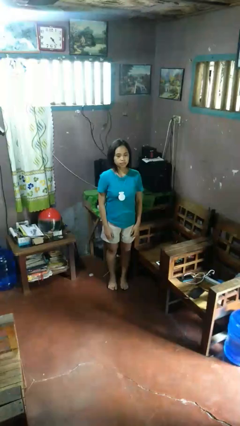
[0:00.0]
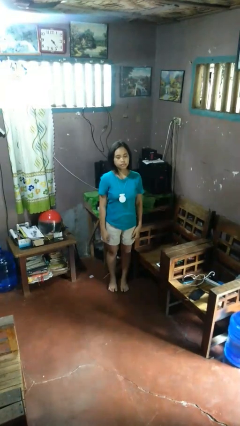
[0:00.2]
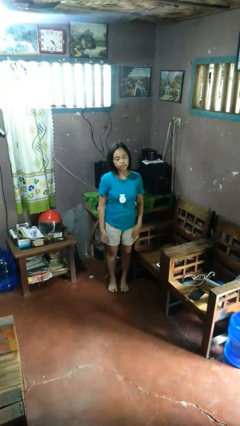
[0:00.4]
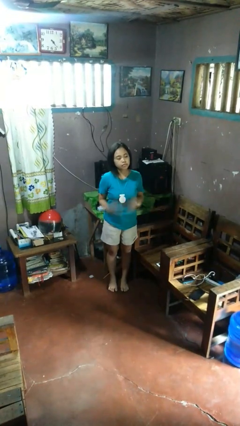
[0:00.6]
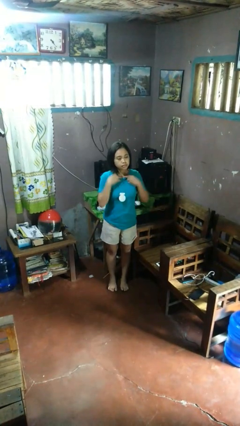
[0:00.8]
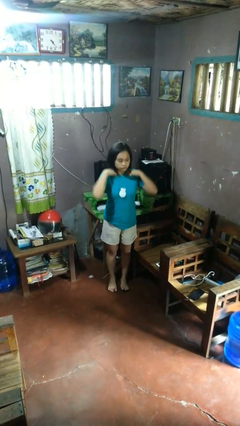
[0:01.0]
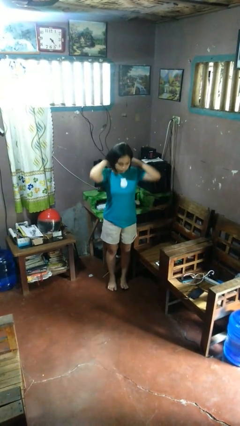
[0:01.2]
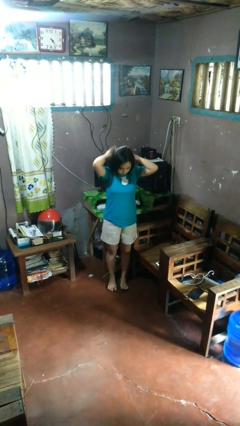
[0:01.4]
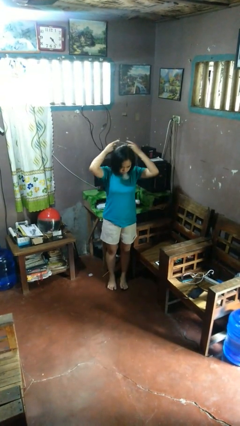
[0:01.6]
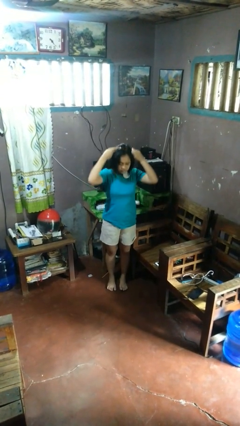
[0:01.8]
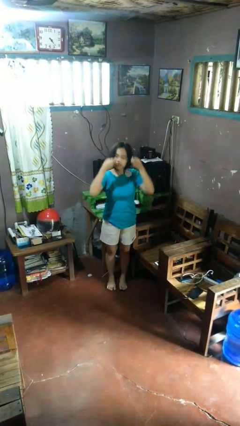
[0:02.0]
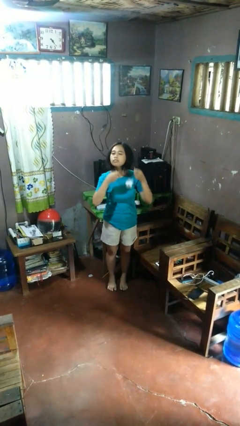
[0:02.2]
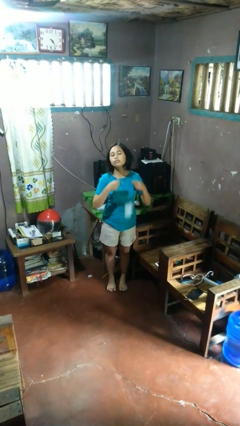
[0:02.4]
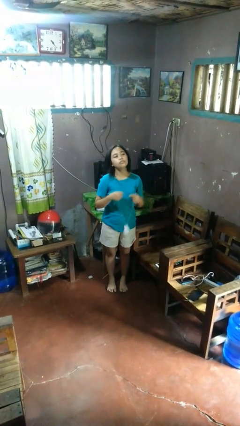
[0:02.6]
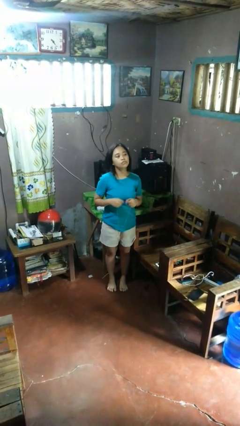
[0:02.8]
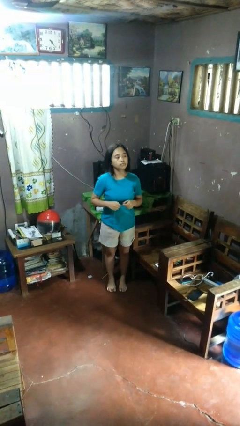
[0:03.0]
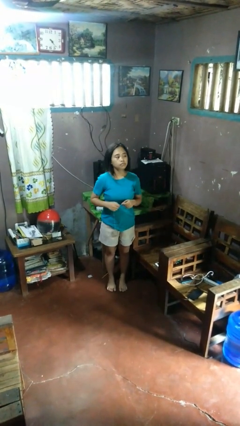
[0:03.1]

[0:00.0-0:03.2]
person takes off necklace

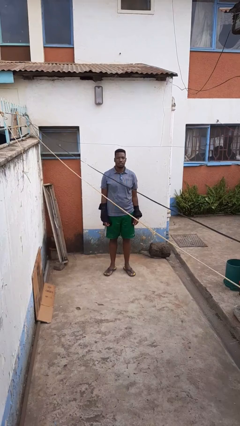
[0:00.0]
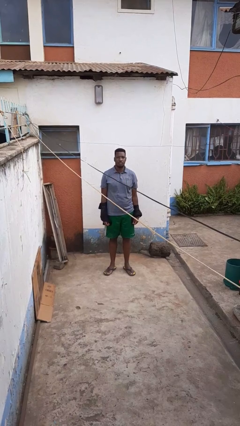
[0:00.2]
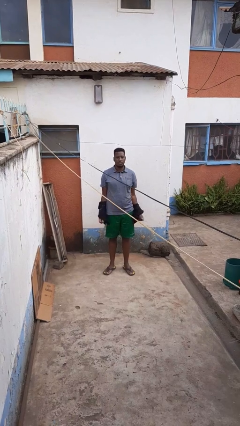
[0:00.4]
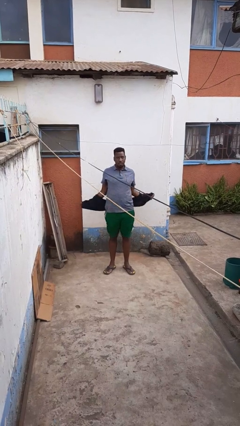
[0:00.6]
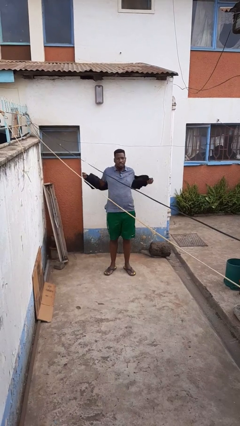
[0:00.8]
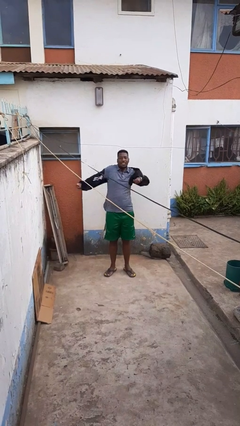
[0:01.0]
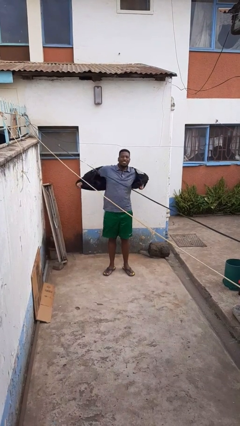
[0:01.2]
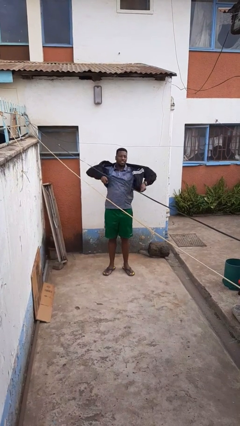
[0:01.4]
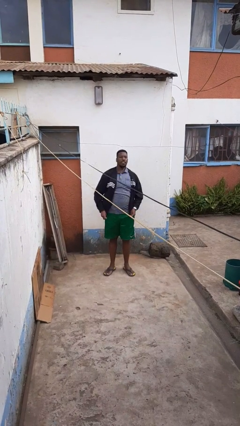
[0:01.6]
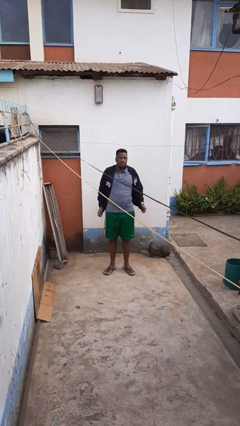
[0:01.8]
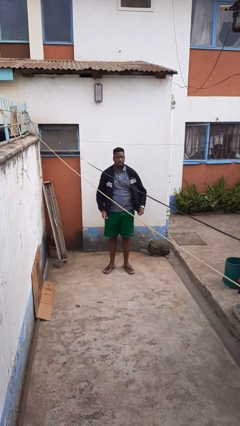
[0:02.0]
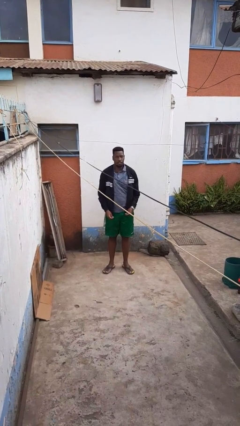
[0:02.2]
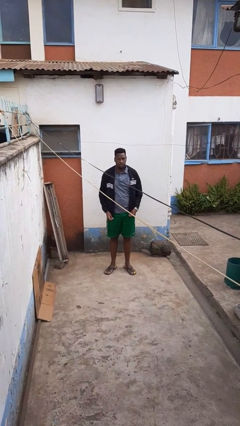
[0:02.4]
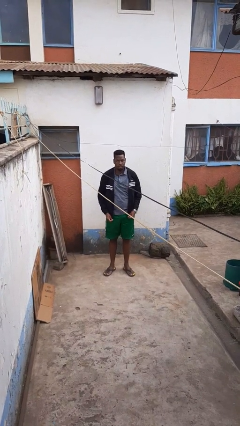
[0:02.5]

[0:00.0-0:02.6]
person puts on jacket

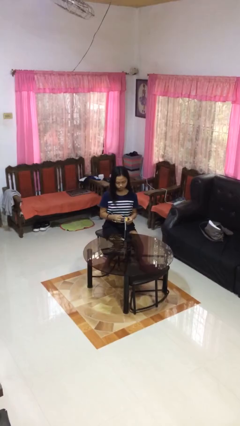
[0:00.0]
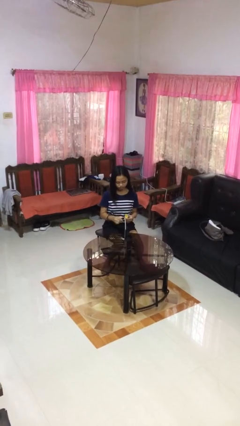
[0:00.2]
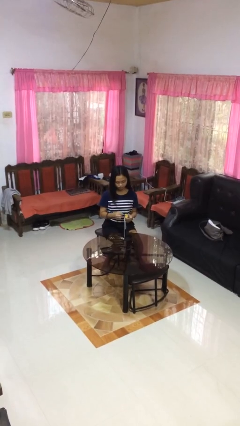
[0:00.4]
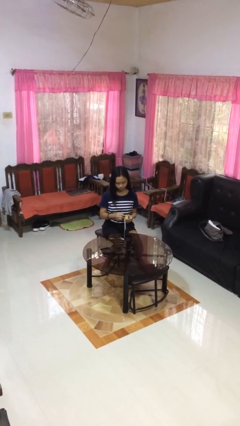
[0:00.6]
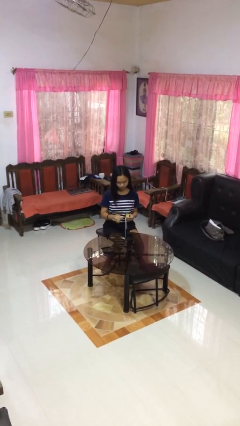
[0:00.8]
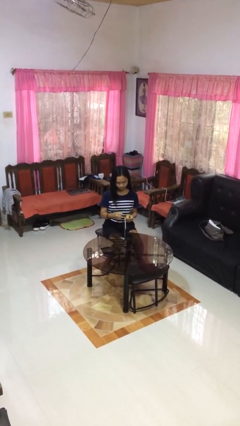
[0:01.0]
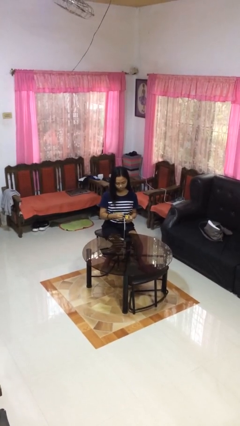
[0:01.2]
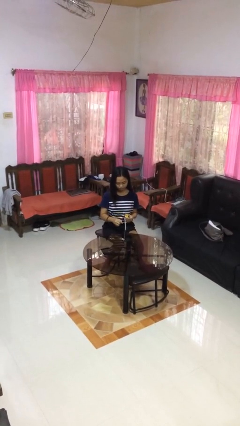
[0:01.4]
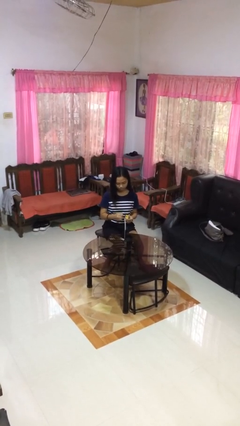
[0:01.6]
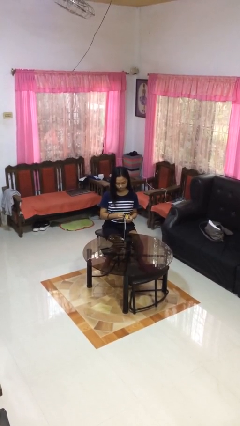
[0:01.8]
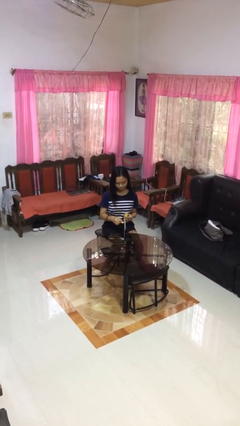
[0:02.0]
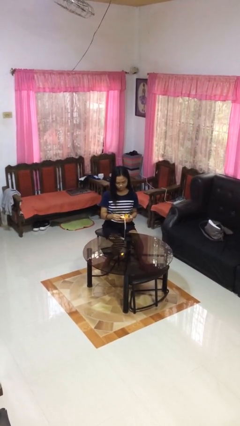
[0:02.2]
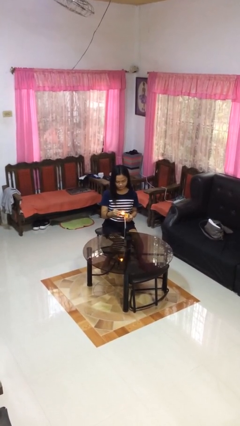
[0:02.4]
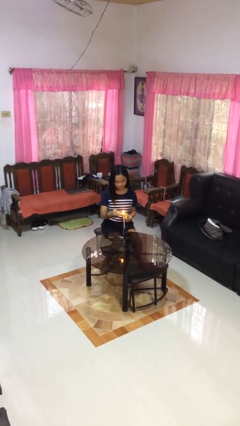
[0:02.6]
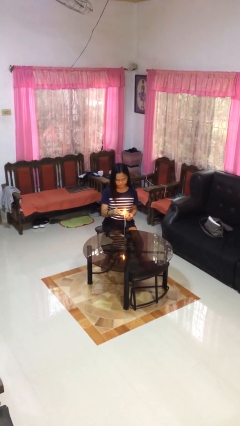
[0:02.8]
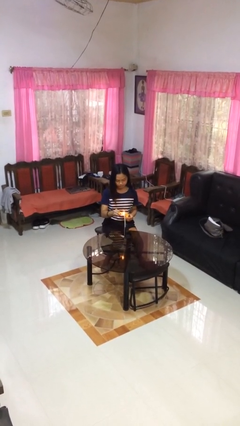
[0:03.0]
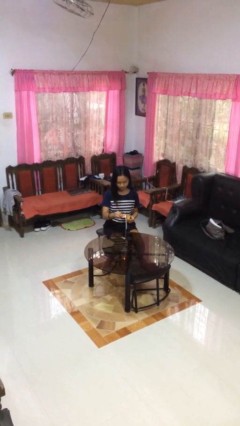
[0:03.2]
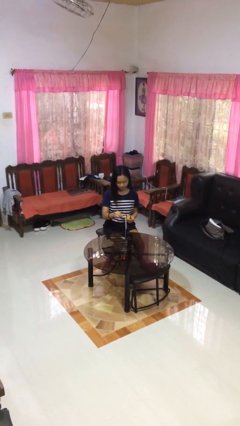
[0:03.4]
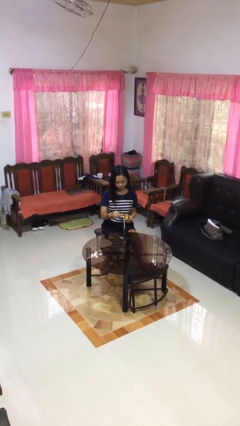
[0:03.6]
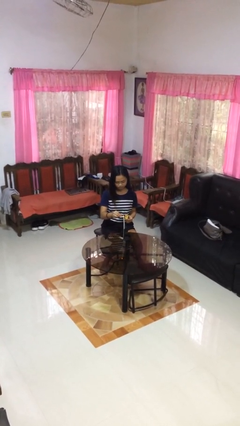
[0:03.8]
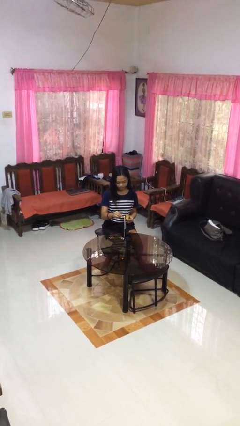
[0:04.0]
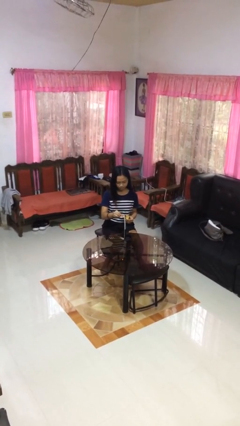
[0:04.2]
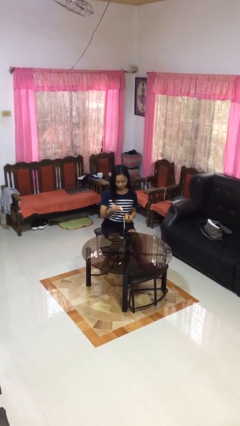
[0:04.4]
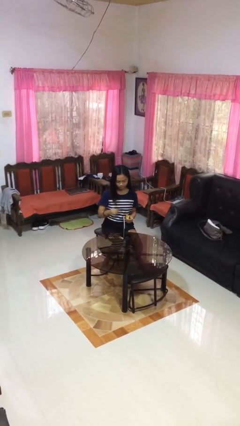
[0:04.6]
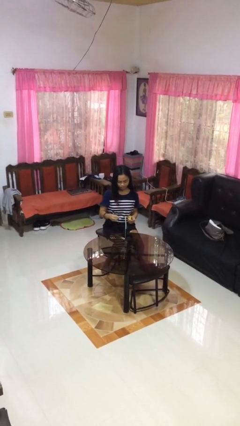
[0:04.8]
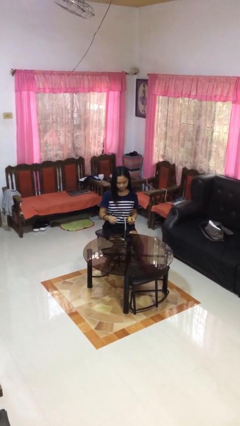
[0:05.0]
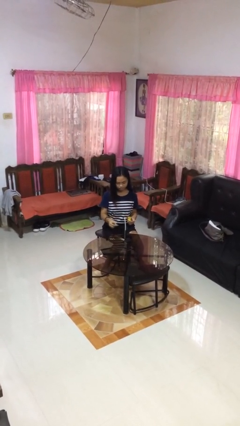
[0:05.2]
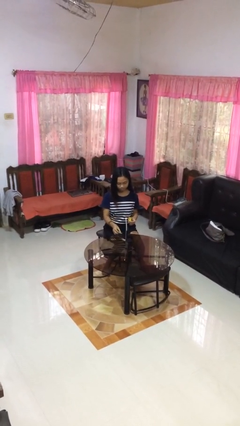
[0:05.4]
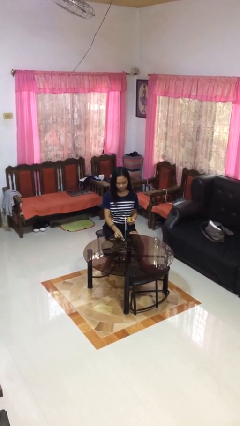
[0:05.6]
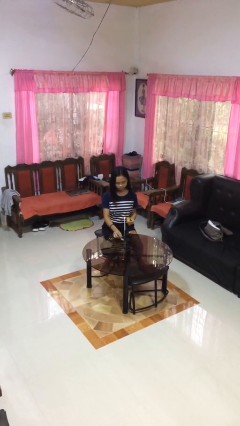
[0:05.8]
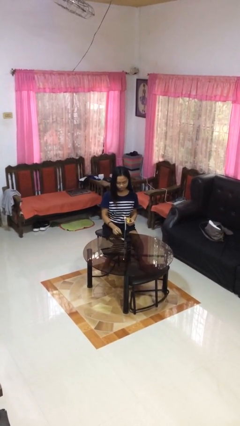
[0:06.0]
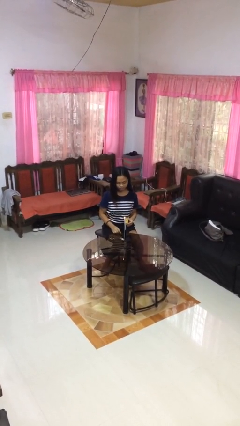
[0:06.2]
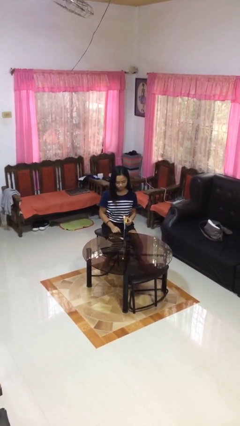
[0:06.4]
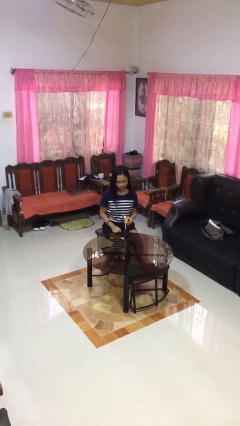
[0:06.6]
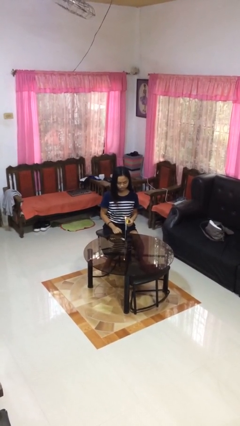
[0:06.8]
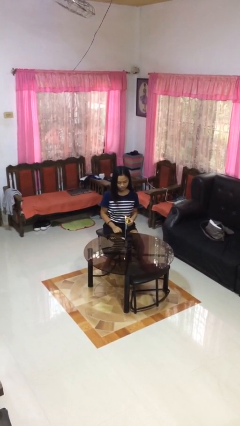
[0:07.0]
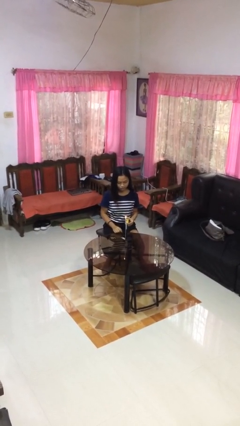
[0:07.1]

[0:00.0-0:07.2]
person lights candle

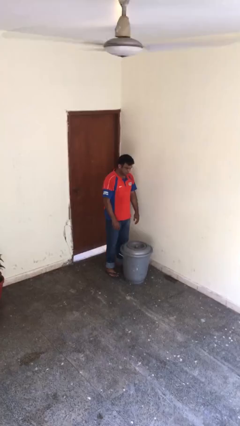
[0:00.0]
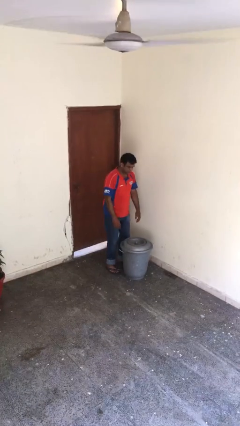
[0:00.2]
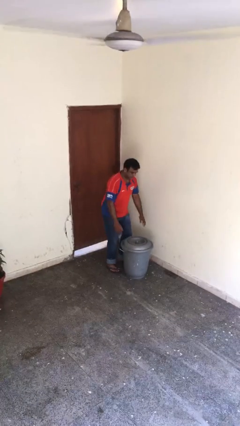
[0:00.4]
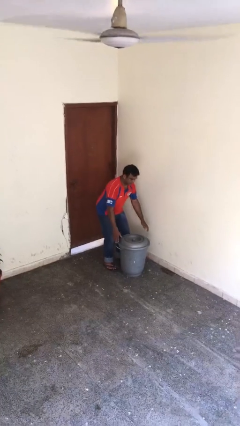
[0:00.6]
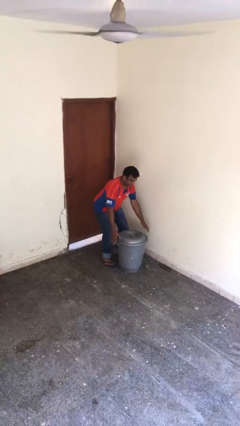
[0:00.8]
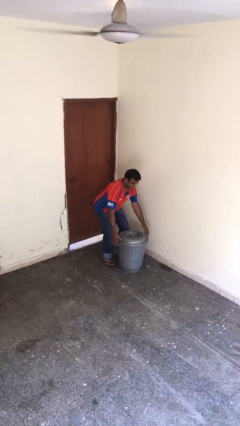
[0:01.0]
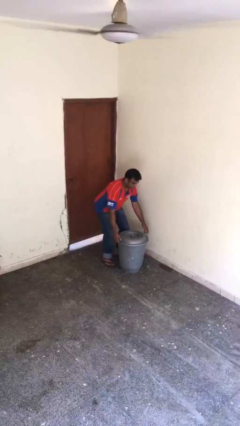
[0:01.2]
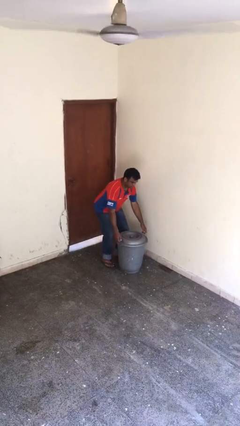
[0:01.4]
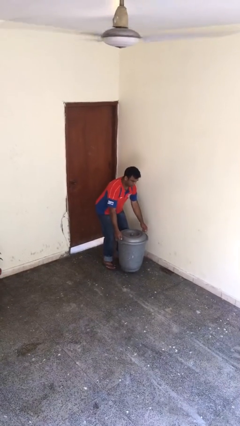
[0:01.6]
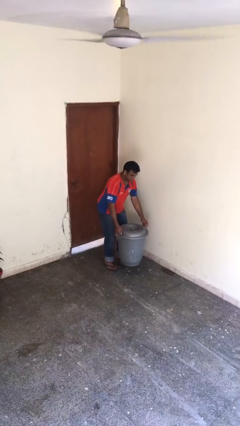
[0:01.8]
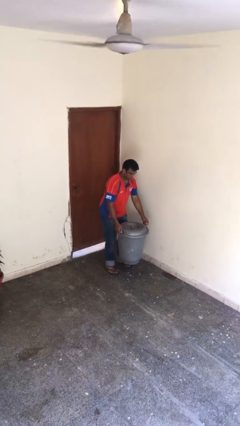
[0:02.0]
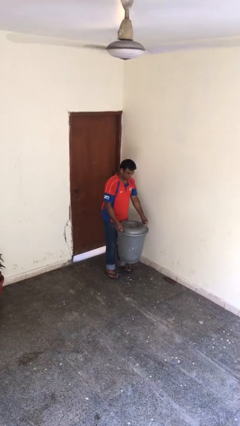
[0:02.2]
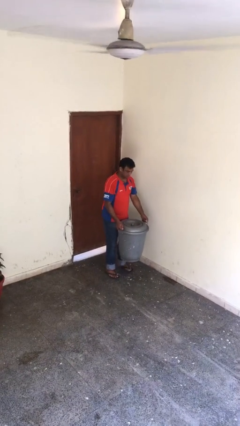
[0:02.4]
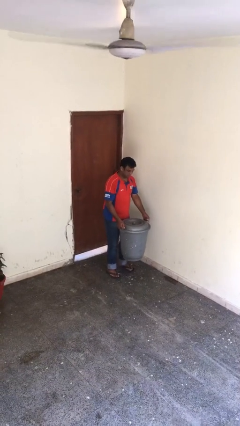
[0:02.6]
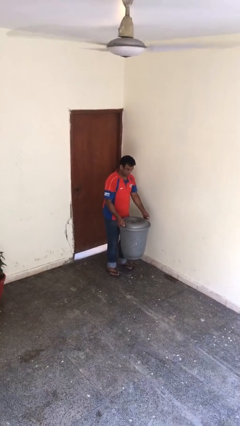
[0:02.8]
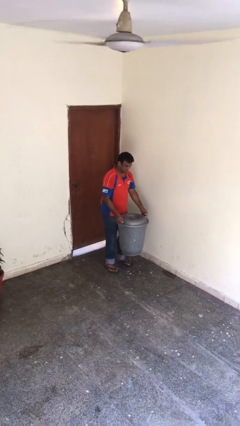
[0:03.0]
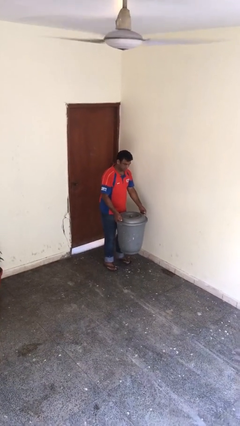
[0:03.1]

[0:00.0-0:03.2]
person picks up object from floor

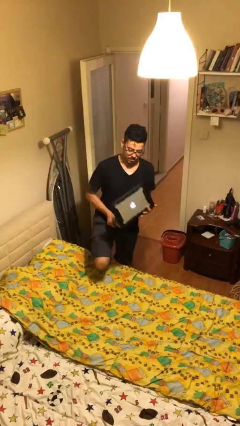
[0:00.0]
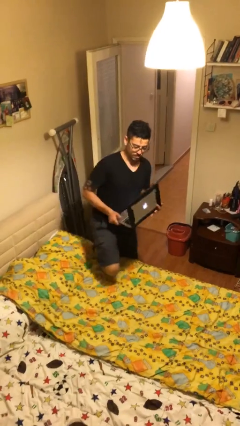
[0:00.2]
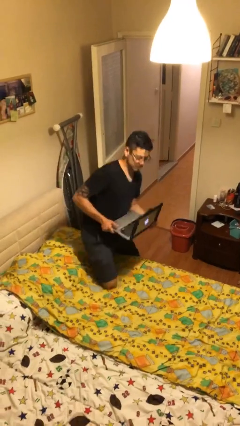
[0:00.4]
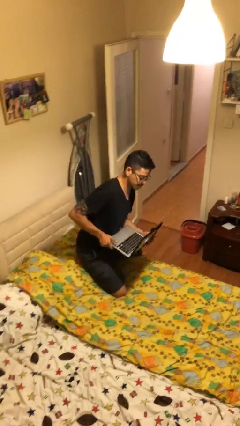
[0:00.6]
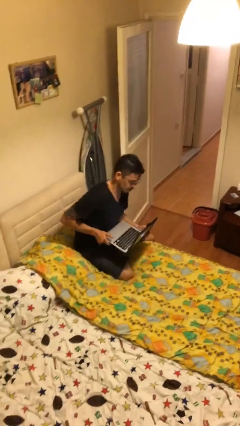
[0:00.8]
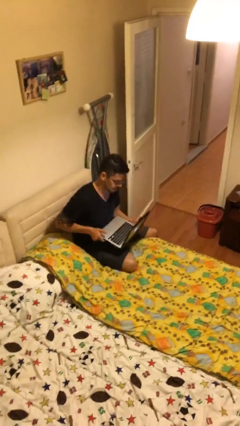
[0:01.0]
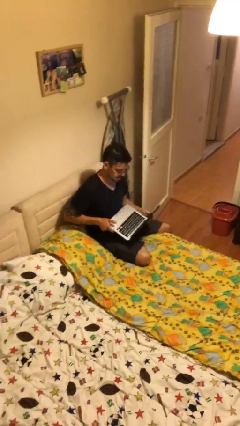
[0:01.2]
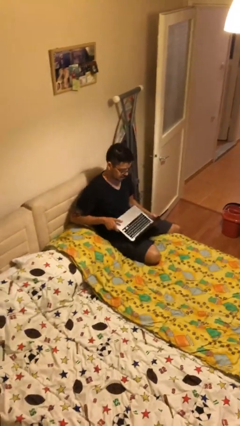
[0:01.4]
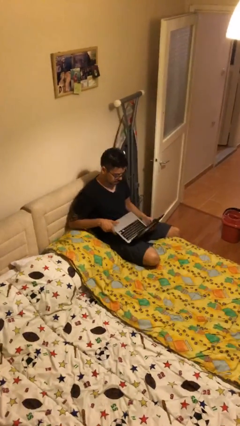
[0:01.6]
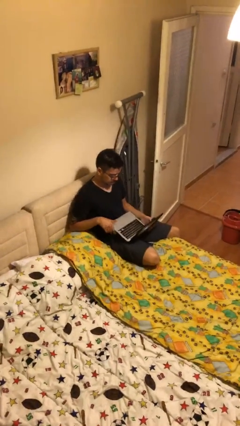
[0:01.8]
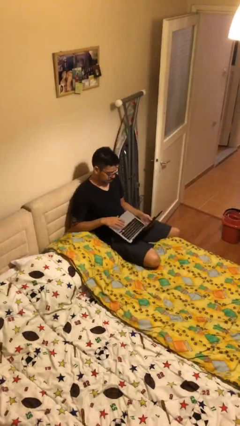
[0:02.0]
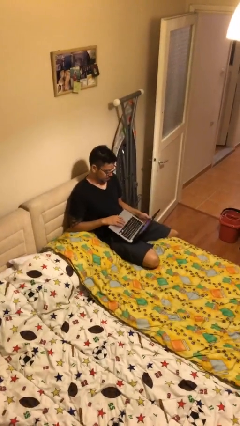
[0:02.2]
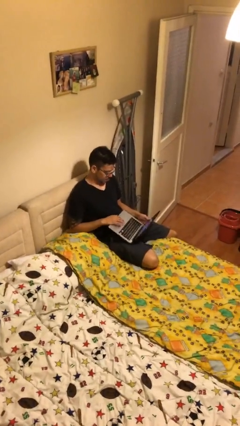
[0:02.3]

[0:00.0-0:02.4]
person sits down
